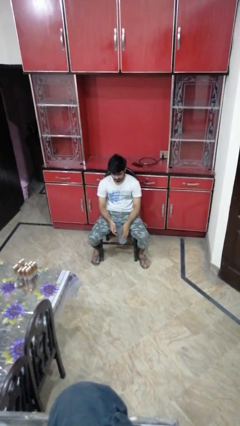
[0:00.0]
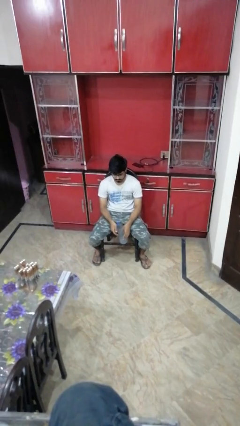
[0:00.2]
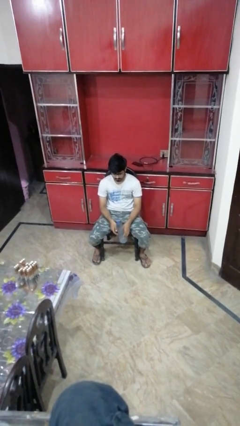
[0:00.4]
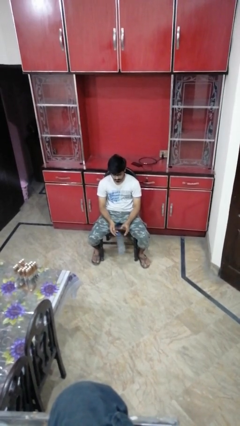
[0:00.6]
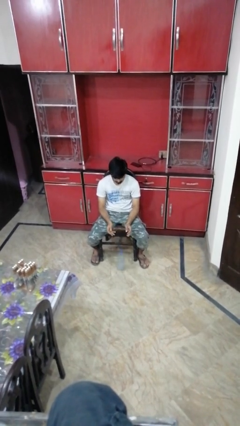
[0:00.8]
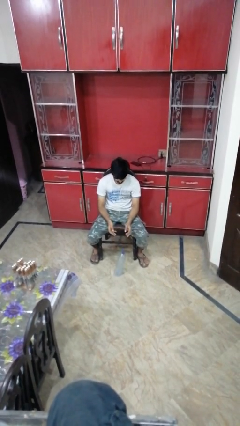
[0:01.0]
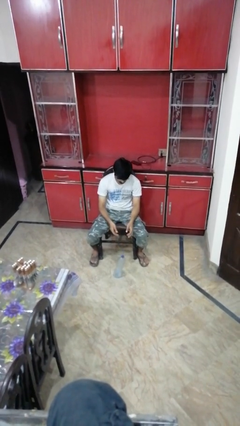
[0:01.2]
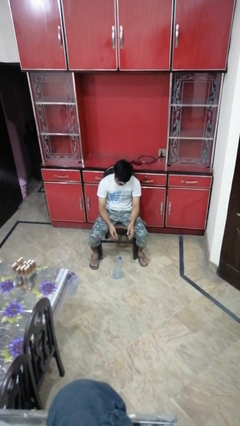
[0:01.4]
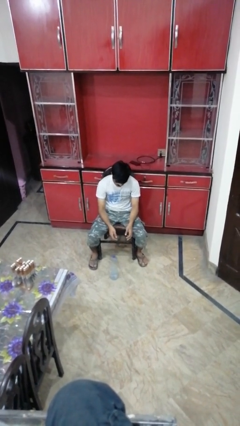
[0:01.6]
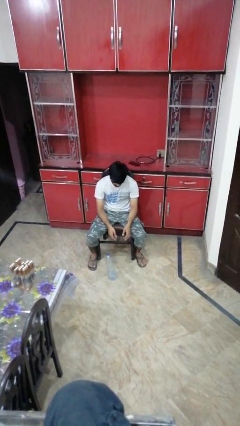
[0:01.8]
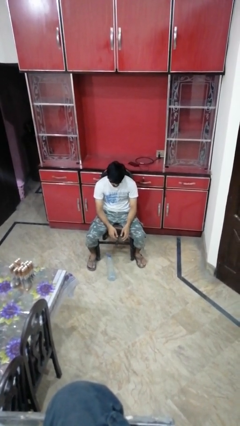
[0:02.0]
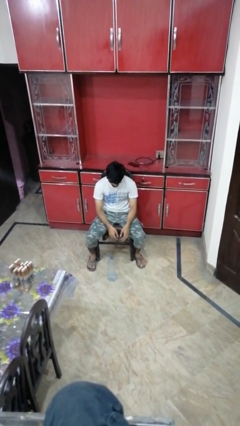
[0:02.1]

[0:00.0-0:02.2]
person drops object

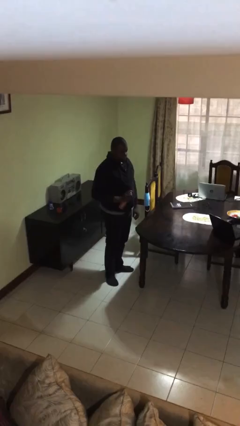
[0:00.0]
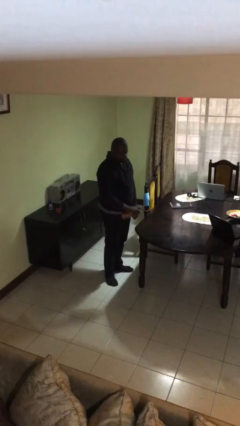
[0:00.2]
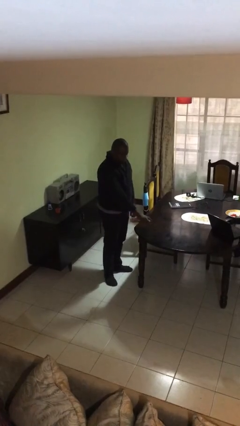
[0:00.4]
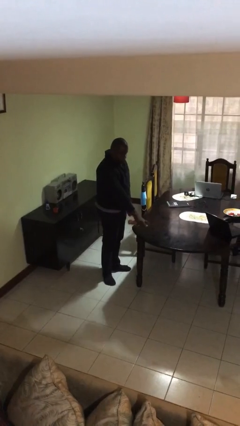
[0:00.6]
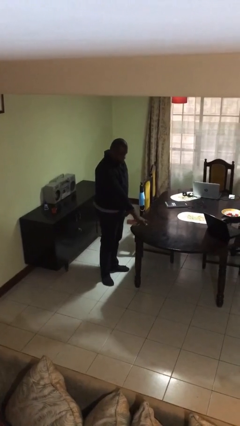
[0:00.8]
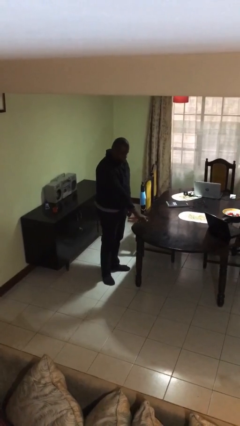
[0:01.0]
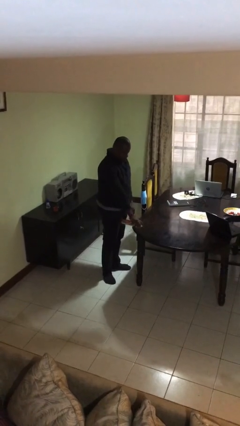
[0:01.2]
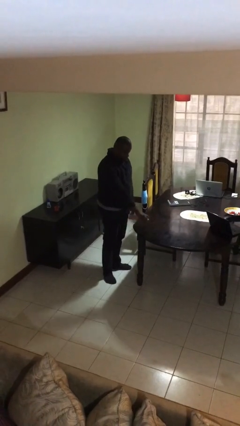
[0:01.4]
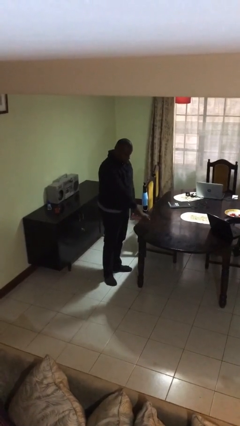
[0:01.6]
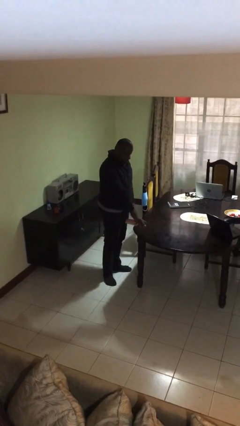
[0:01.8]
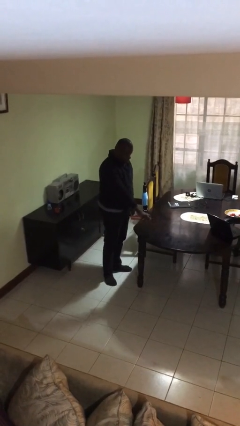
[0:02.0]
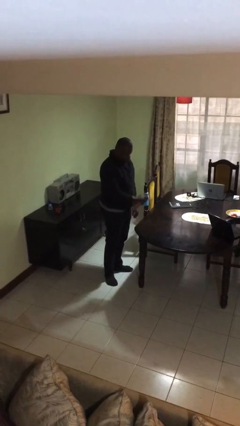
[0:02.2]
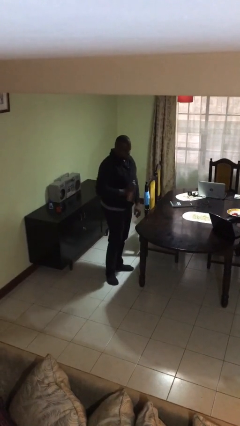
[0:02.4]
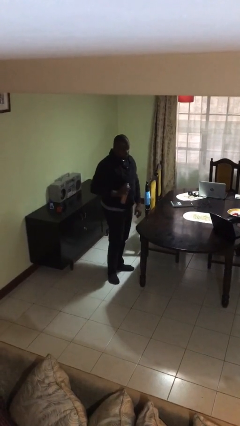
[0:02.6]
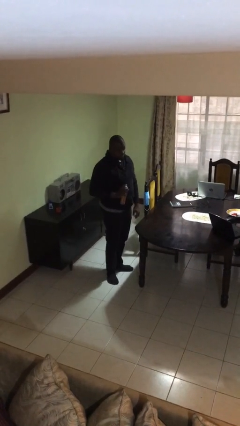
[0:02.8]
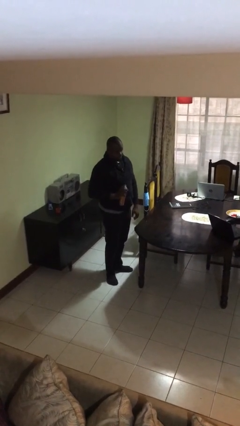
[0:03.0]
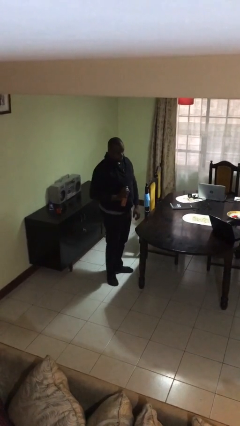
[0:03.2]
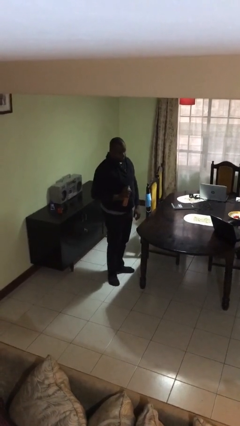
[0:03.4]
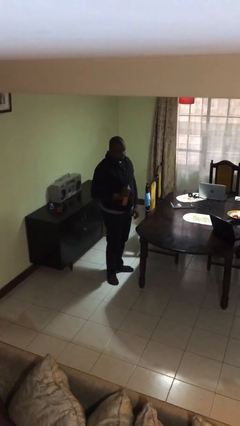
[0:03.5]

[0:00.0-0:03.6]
person sprays from bottle

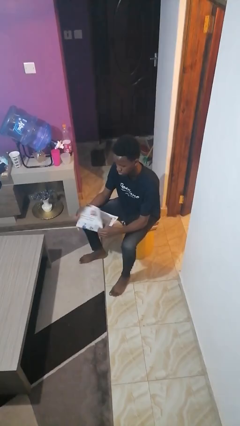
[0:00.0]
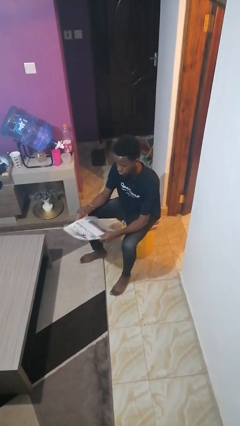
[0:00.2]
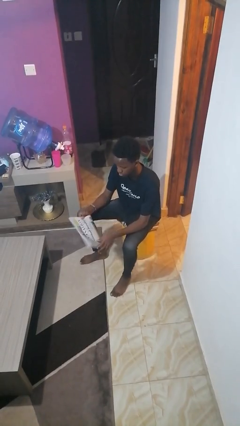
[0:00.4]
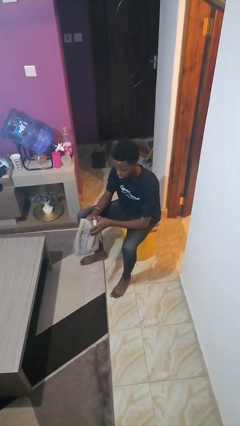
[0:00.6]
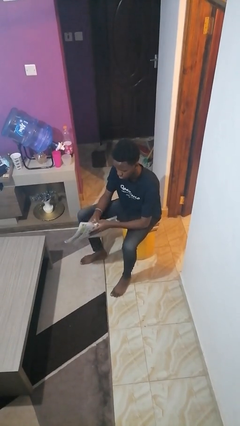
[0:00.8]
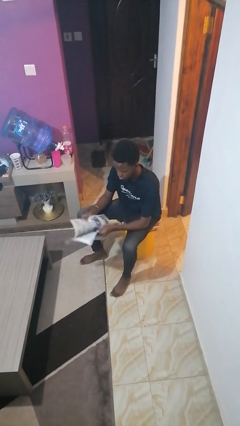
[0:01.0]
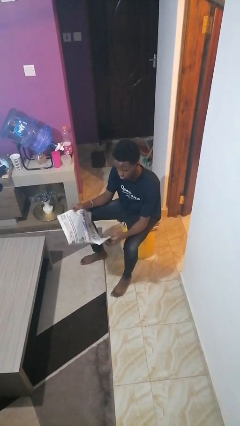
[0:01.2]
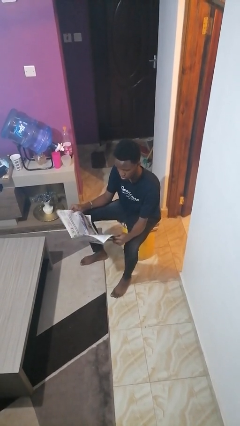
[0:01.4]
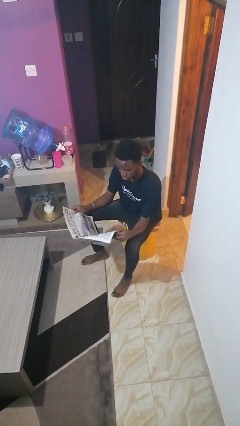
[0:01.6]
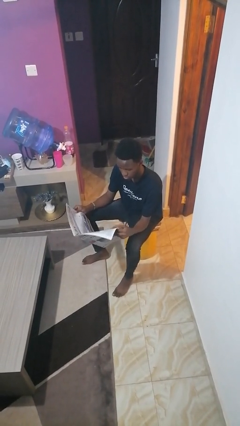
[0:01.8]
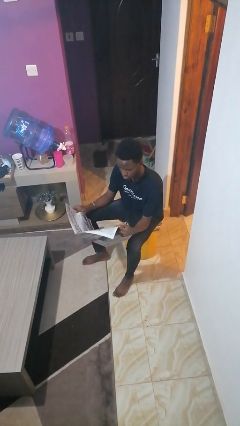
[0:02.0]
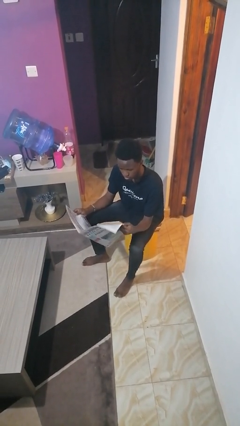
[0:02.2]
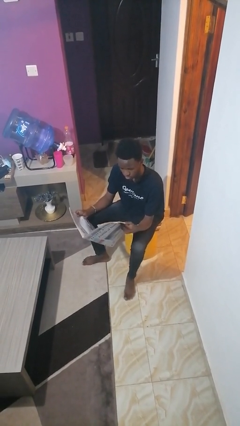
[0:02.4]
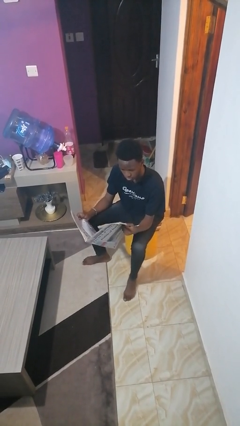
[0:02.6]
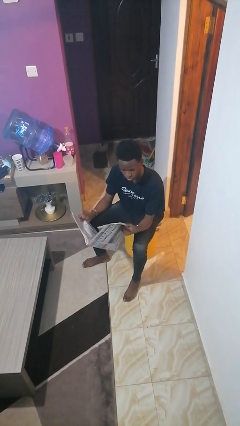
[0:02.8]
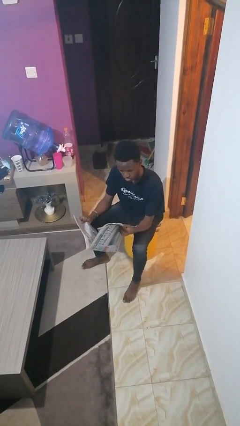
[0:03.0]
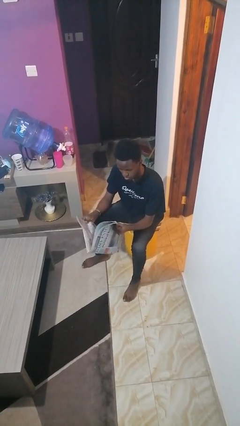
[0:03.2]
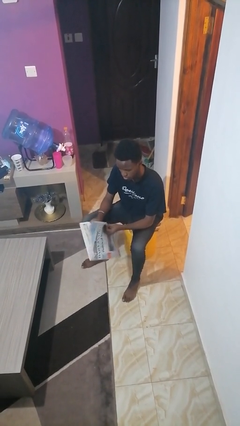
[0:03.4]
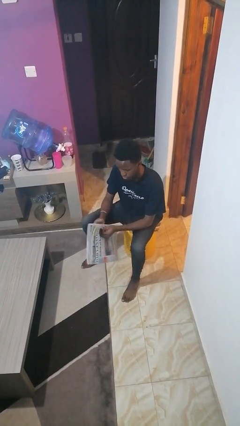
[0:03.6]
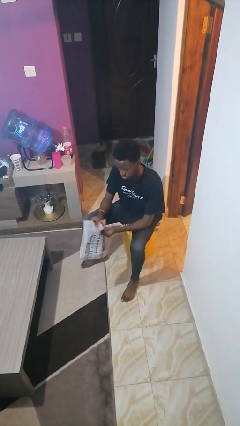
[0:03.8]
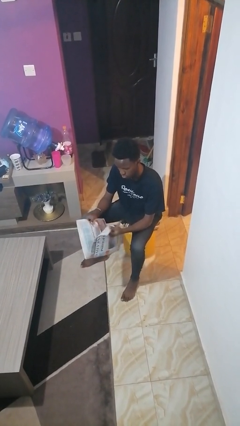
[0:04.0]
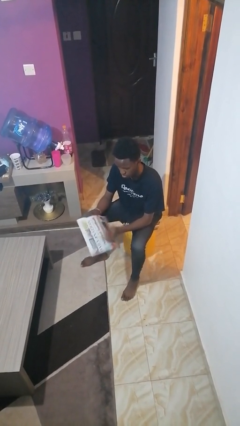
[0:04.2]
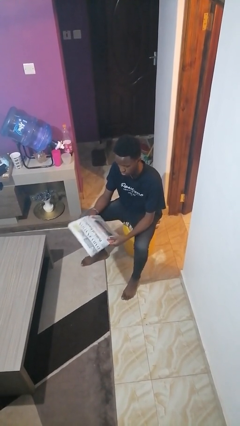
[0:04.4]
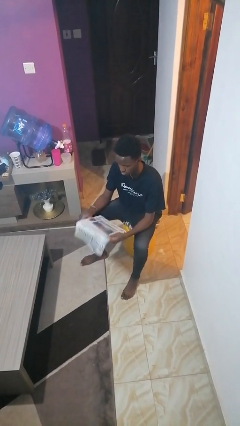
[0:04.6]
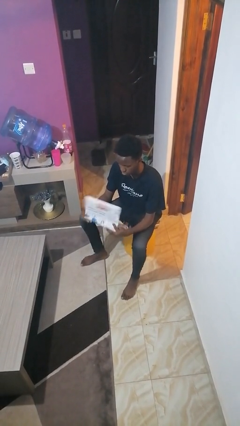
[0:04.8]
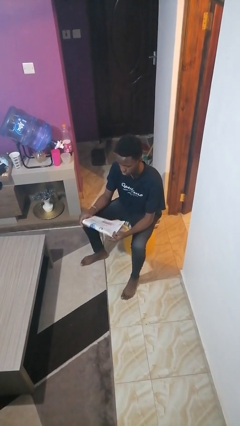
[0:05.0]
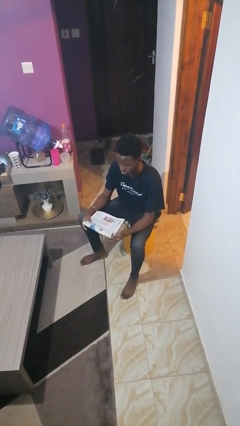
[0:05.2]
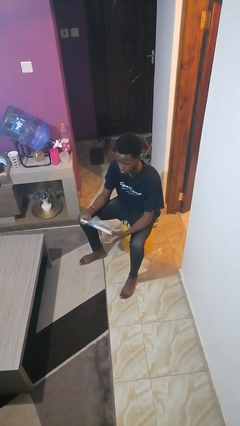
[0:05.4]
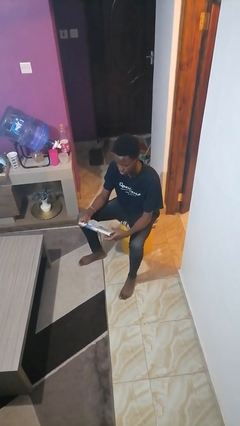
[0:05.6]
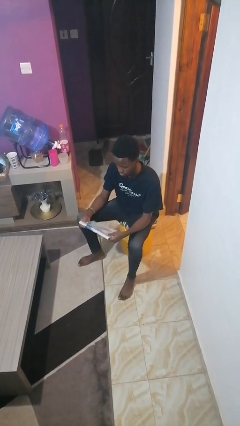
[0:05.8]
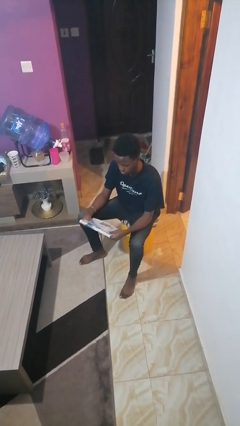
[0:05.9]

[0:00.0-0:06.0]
person reads newspaper

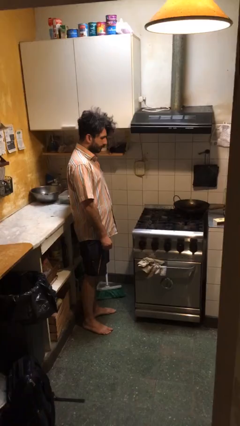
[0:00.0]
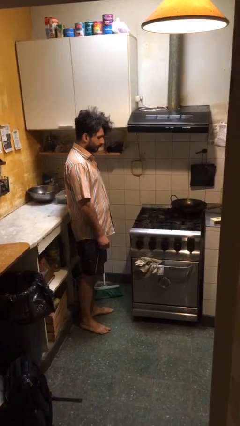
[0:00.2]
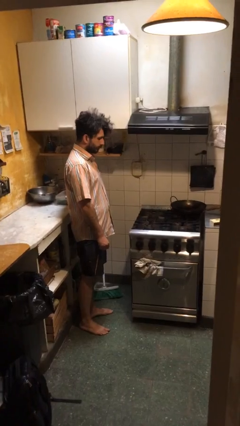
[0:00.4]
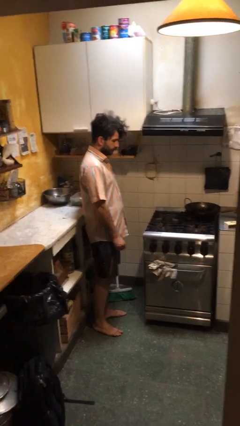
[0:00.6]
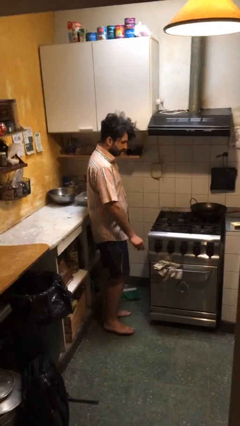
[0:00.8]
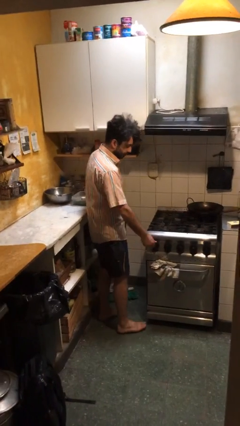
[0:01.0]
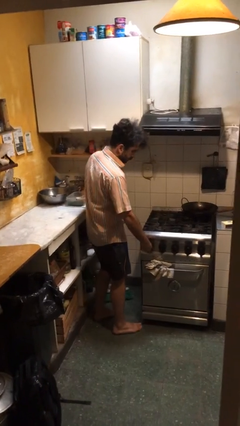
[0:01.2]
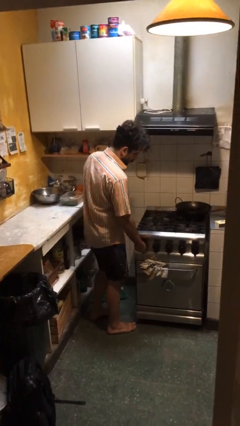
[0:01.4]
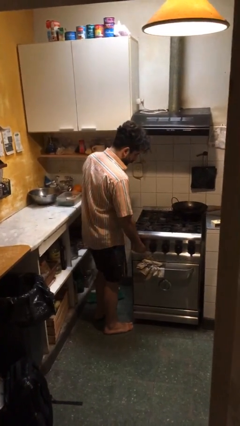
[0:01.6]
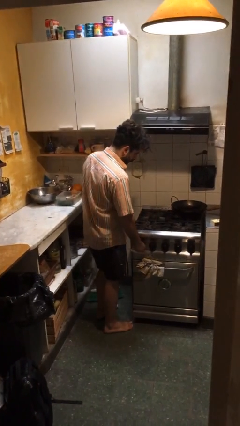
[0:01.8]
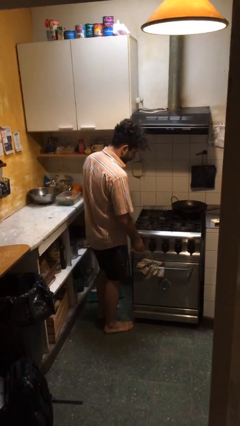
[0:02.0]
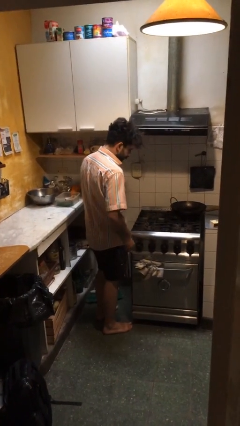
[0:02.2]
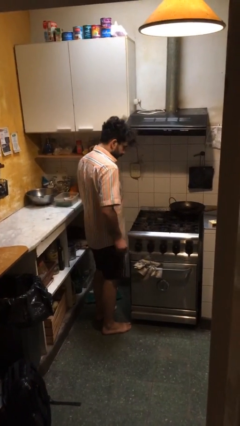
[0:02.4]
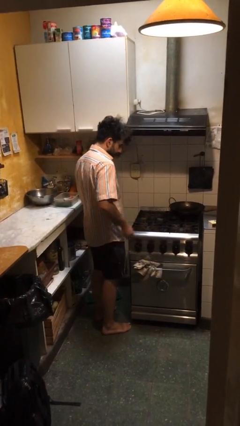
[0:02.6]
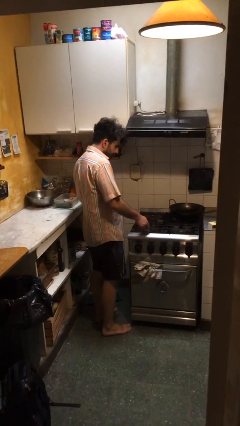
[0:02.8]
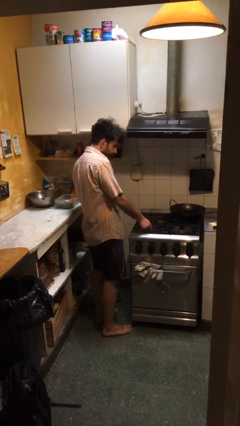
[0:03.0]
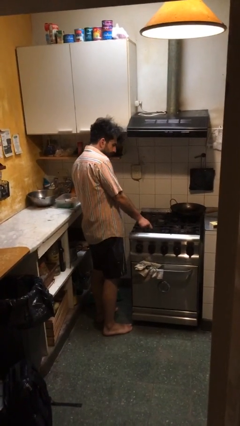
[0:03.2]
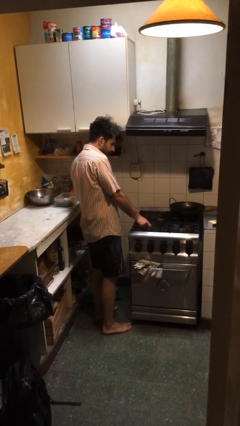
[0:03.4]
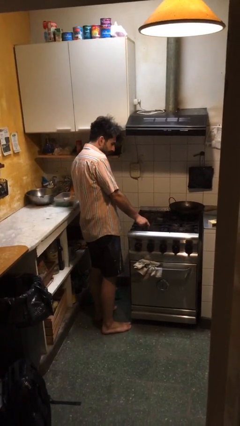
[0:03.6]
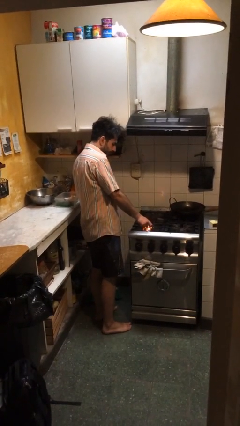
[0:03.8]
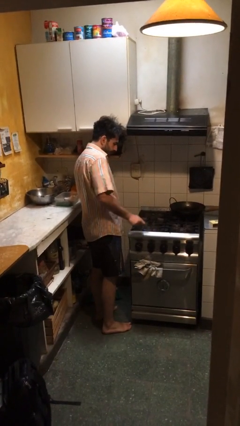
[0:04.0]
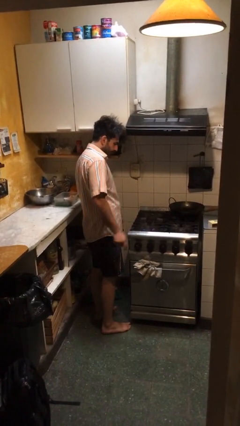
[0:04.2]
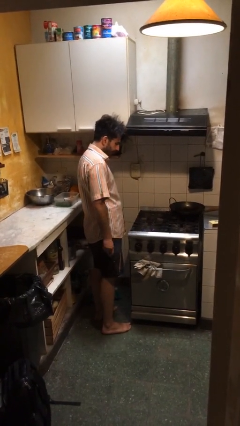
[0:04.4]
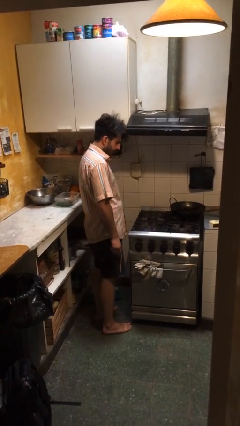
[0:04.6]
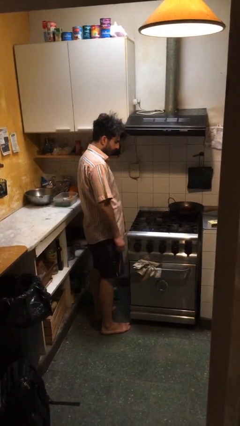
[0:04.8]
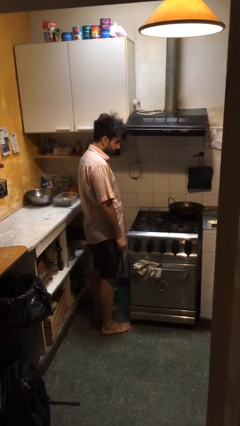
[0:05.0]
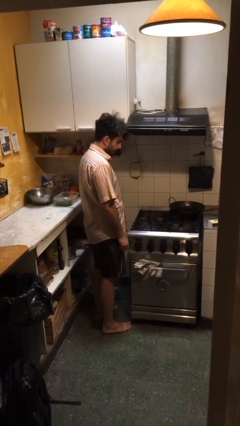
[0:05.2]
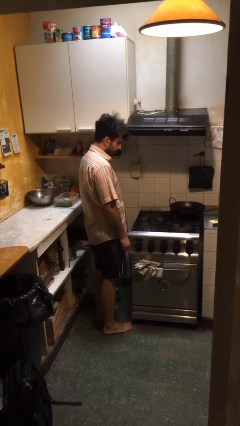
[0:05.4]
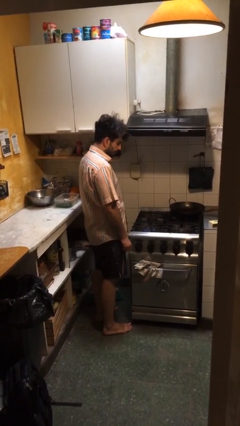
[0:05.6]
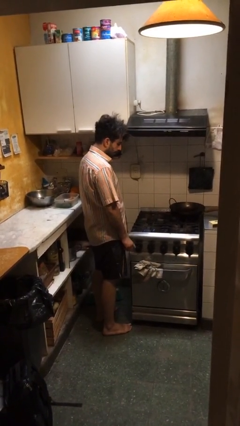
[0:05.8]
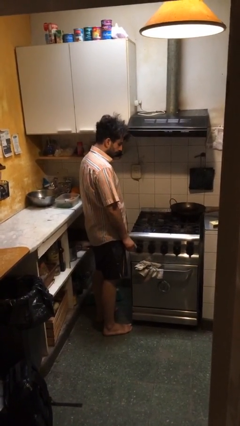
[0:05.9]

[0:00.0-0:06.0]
person turns on stovetop
